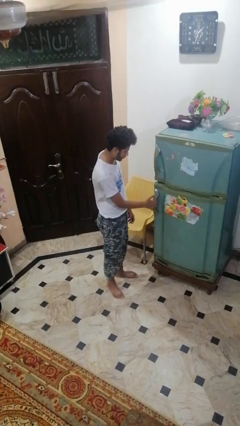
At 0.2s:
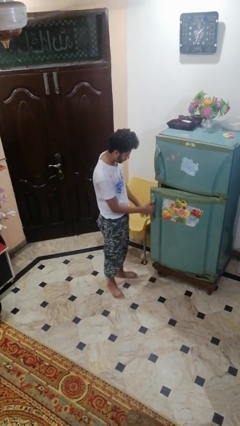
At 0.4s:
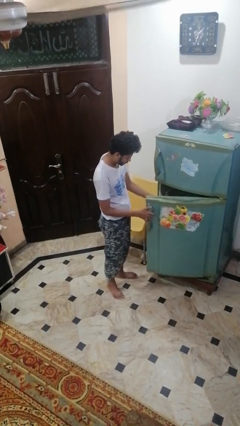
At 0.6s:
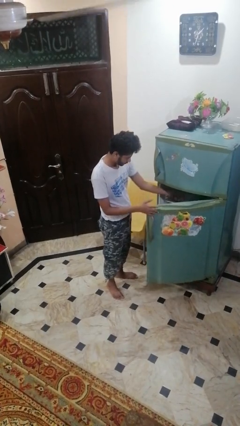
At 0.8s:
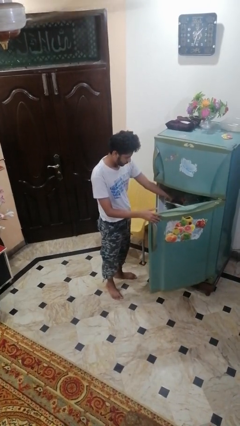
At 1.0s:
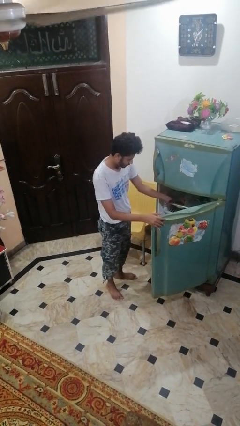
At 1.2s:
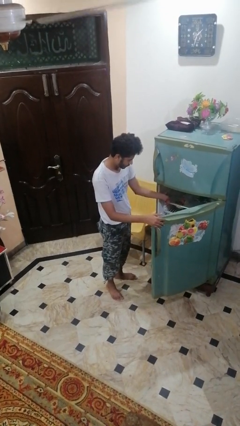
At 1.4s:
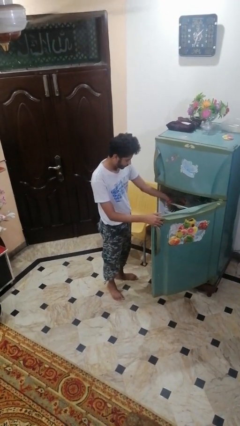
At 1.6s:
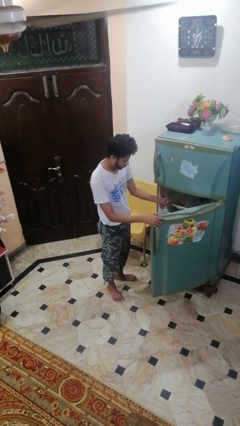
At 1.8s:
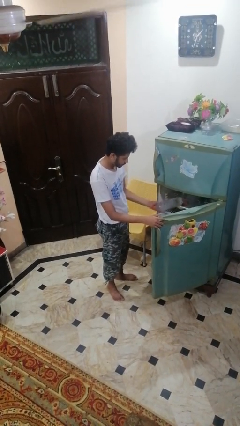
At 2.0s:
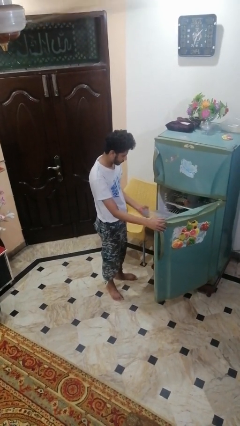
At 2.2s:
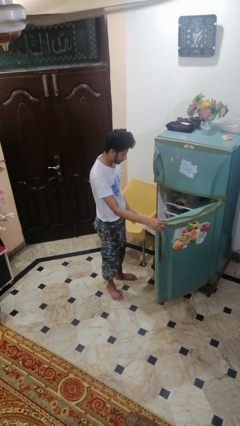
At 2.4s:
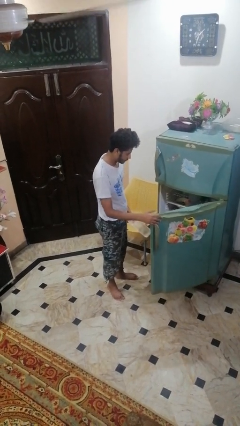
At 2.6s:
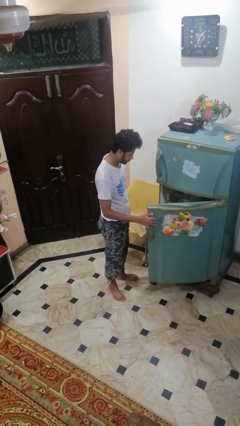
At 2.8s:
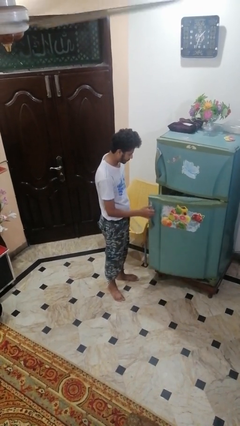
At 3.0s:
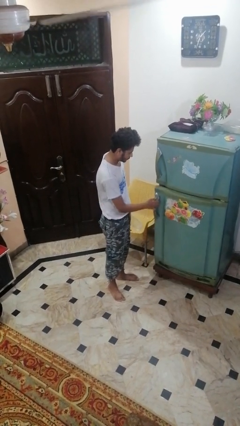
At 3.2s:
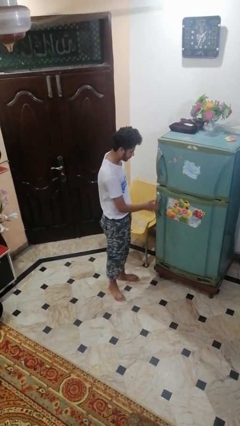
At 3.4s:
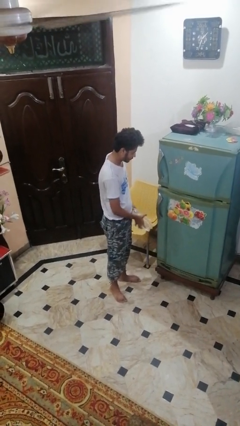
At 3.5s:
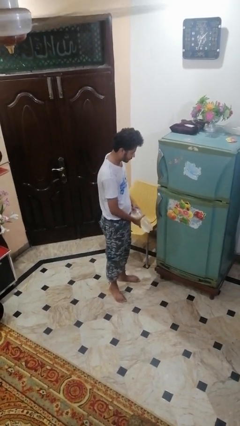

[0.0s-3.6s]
person takes object from refrigerator

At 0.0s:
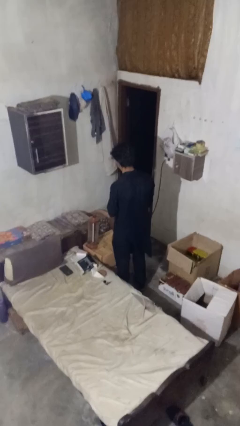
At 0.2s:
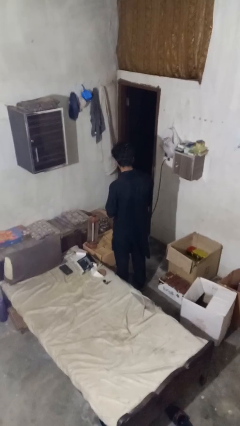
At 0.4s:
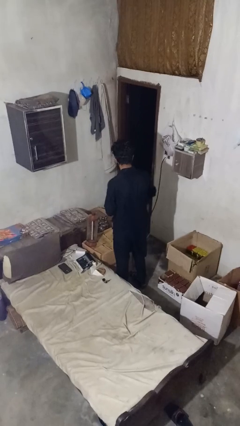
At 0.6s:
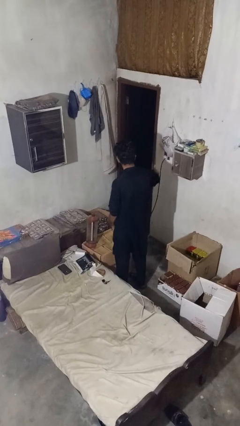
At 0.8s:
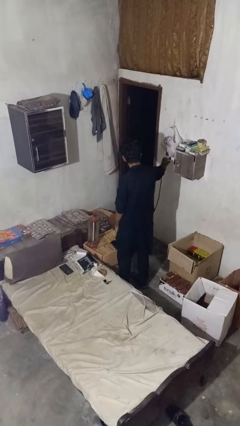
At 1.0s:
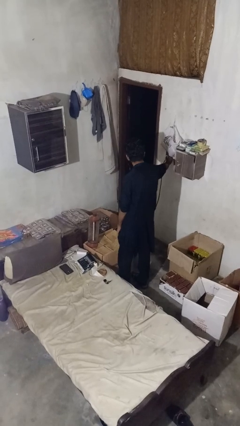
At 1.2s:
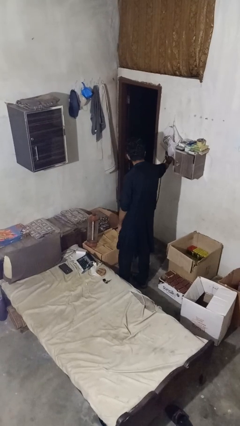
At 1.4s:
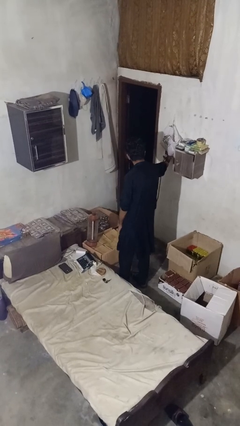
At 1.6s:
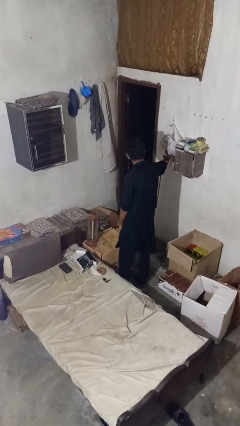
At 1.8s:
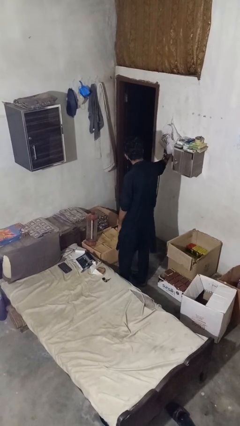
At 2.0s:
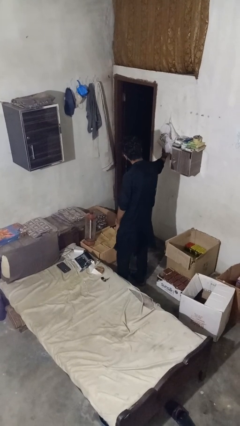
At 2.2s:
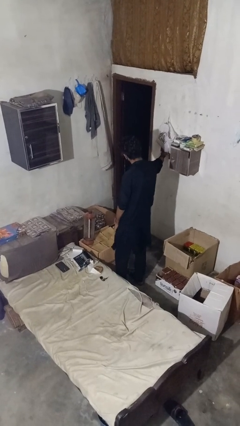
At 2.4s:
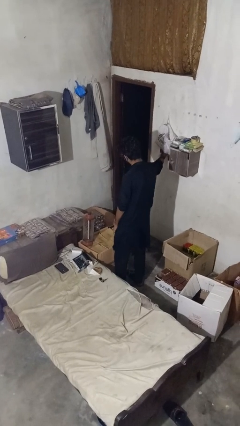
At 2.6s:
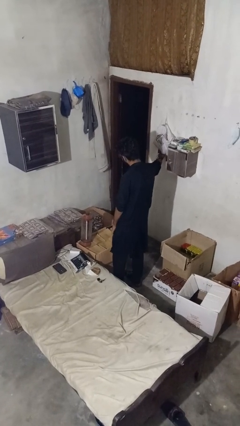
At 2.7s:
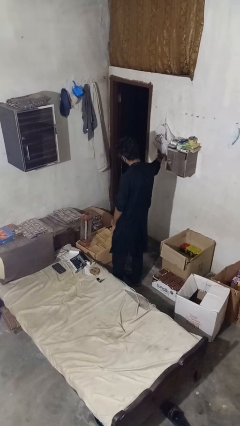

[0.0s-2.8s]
person turns on lamp

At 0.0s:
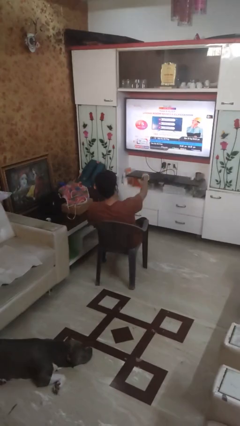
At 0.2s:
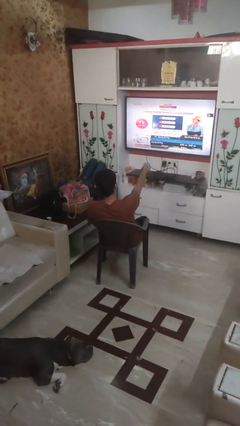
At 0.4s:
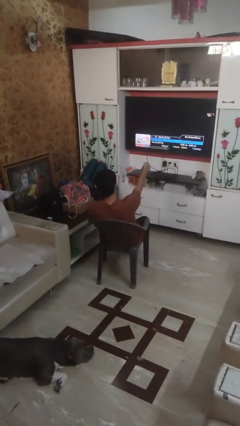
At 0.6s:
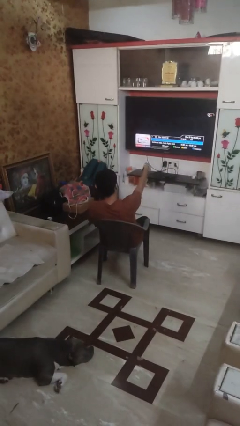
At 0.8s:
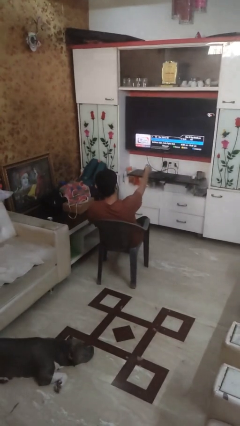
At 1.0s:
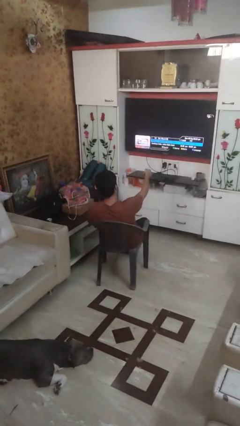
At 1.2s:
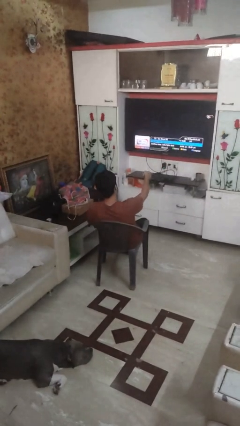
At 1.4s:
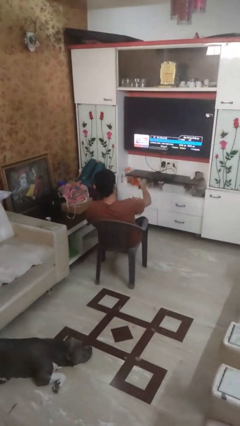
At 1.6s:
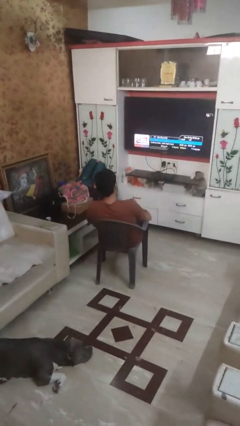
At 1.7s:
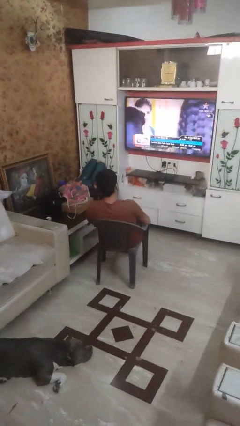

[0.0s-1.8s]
person uses television remote

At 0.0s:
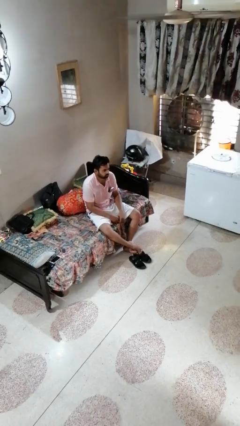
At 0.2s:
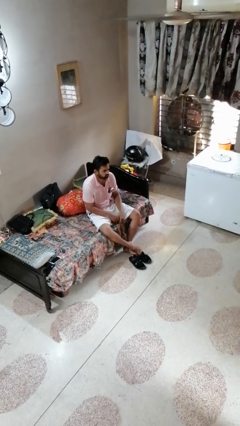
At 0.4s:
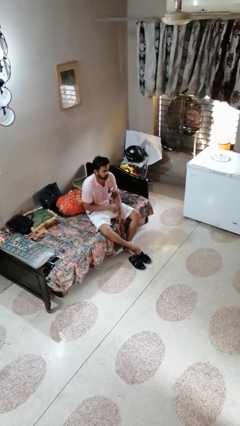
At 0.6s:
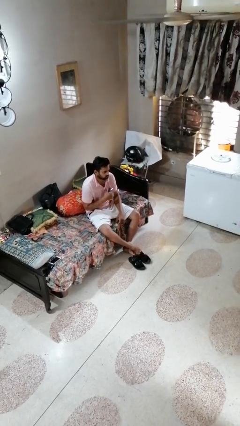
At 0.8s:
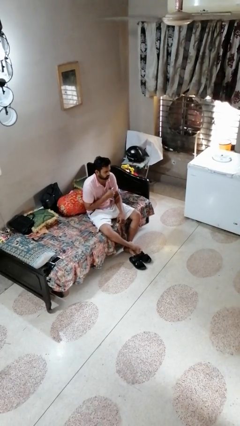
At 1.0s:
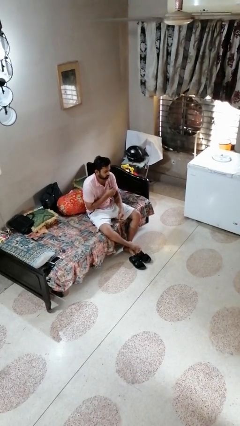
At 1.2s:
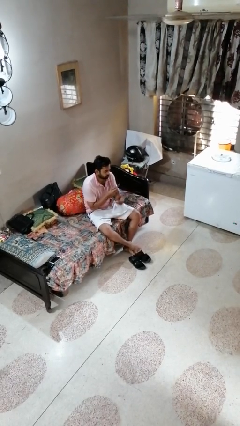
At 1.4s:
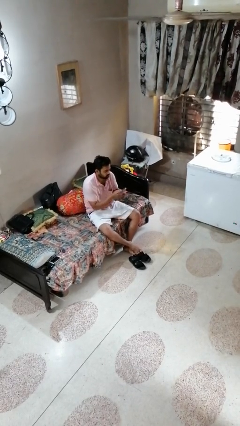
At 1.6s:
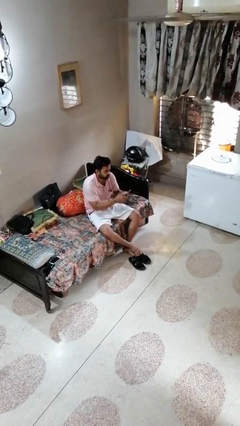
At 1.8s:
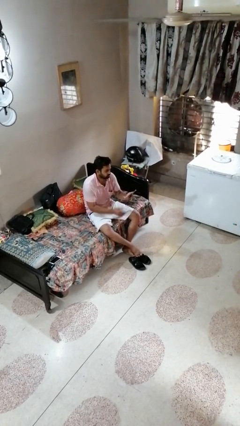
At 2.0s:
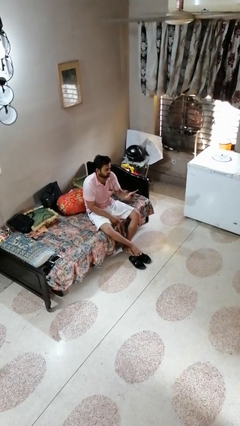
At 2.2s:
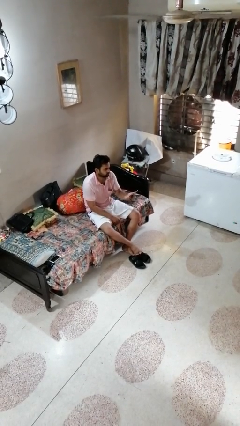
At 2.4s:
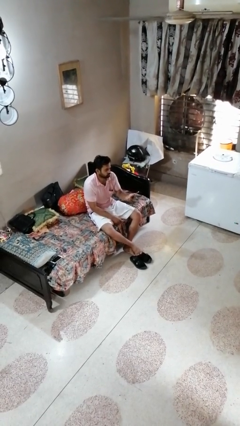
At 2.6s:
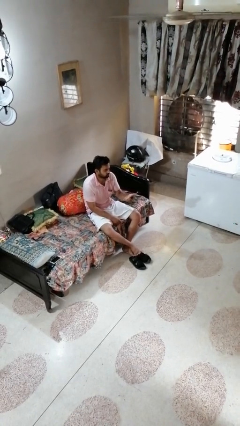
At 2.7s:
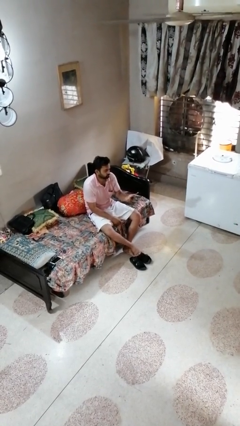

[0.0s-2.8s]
person takes phone from pocket

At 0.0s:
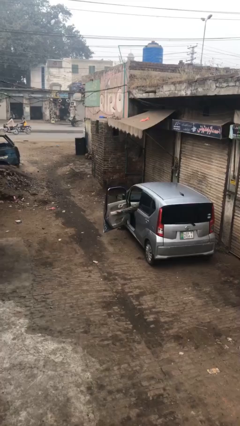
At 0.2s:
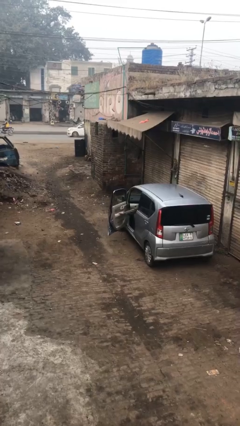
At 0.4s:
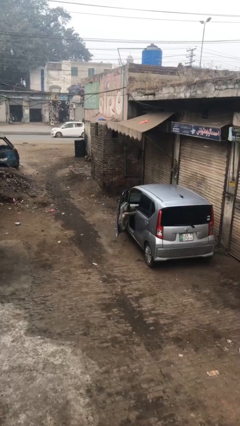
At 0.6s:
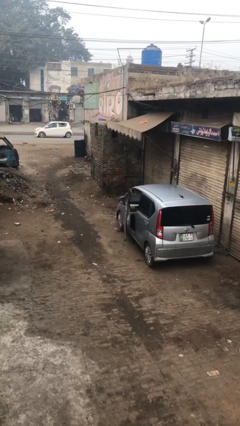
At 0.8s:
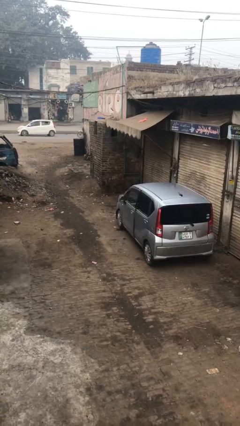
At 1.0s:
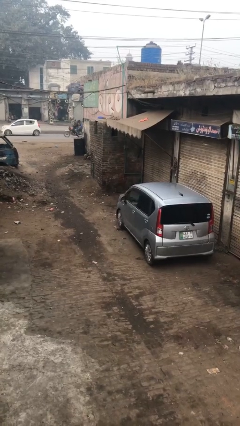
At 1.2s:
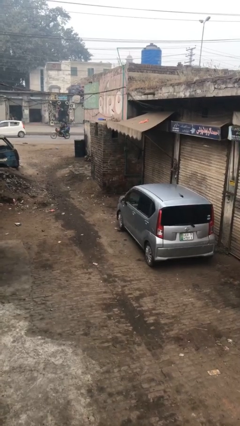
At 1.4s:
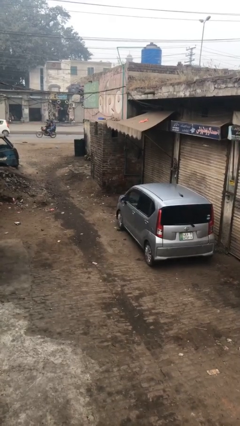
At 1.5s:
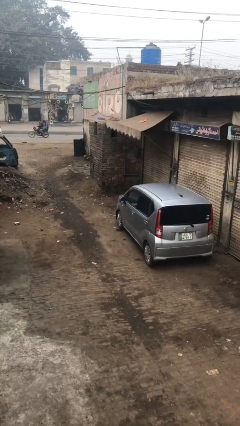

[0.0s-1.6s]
person closes car door

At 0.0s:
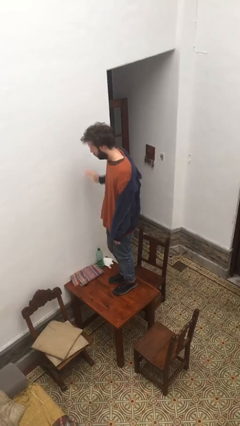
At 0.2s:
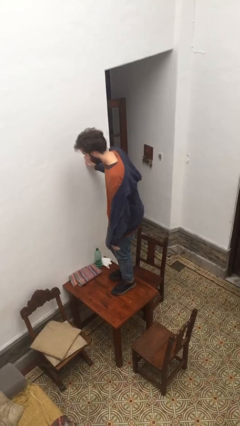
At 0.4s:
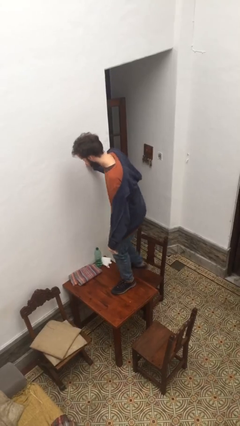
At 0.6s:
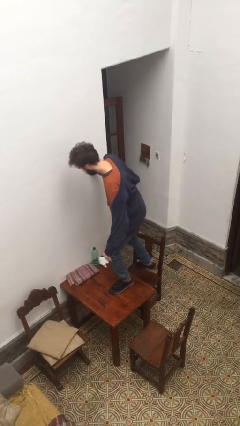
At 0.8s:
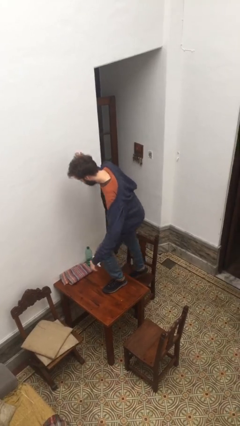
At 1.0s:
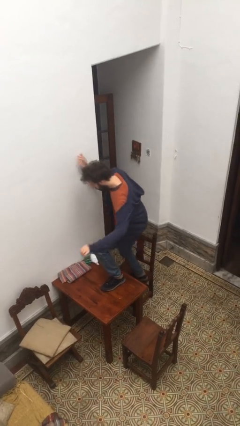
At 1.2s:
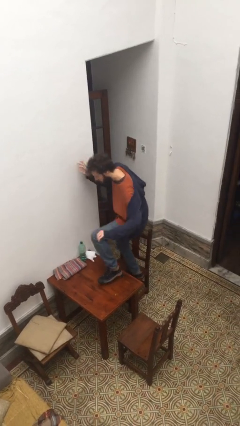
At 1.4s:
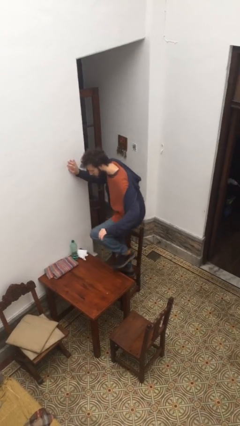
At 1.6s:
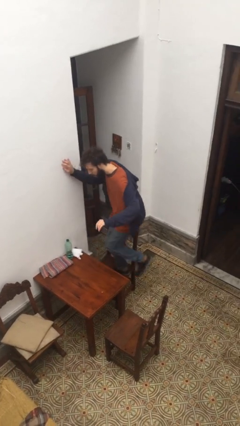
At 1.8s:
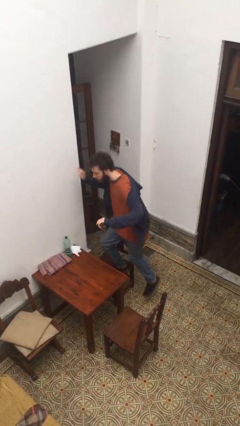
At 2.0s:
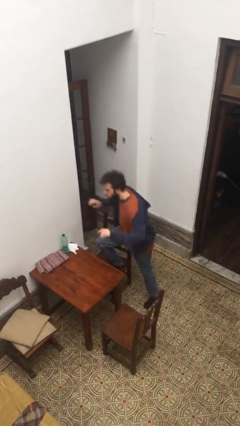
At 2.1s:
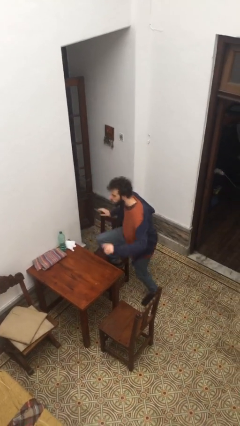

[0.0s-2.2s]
person climbs off table

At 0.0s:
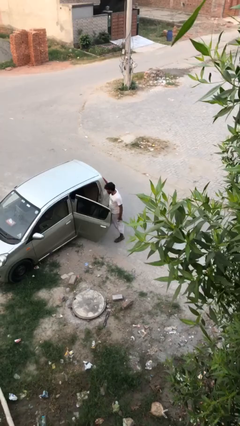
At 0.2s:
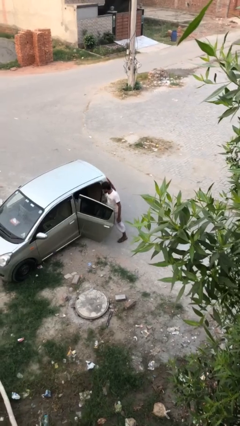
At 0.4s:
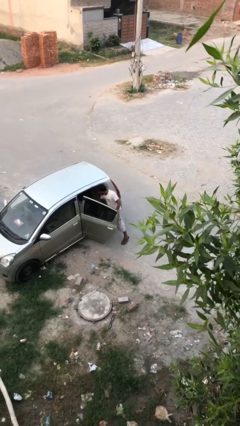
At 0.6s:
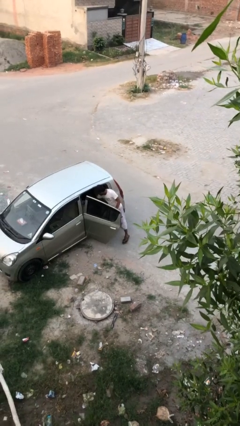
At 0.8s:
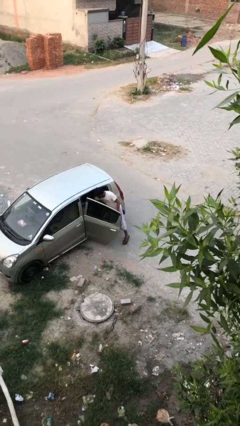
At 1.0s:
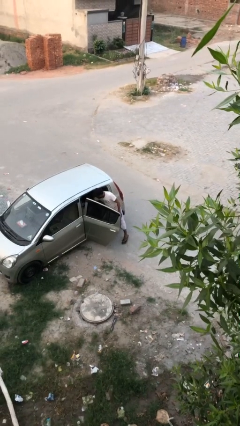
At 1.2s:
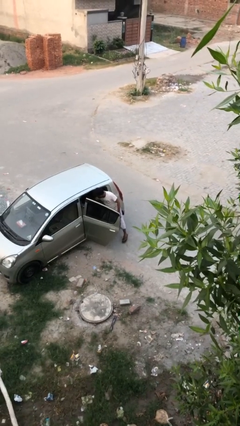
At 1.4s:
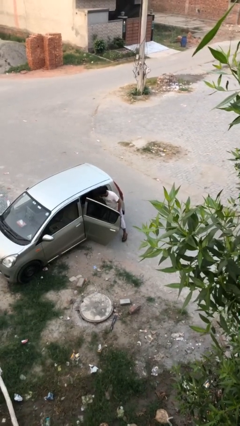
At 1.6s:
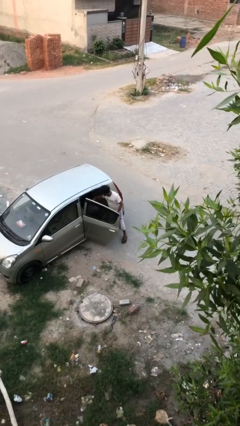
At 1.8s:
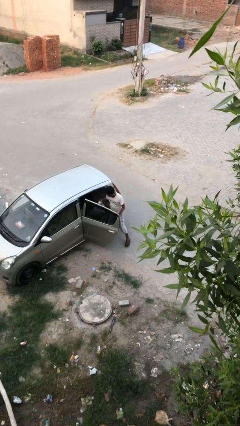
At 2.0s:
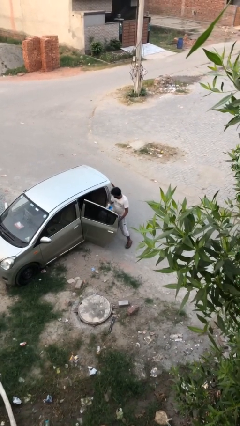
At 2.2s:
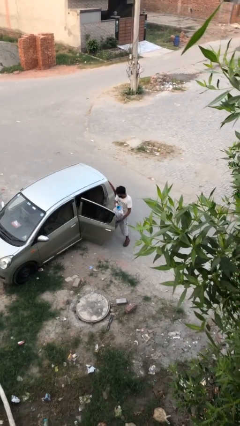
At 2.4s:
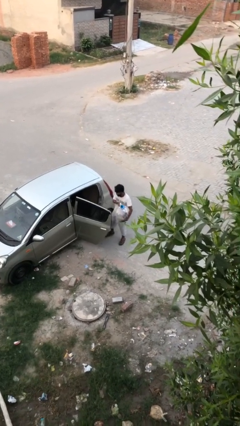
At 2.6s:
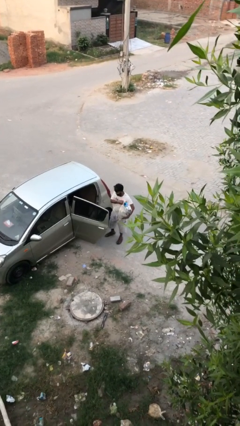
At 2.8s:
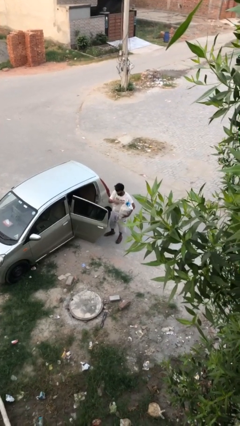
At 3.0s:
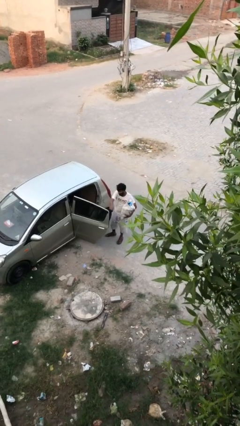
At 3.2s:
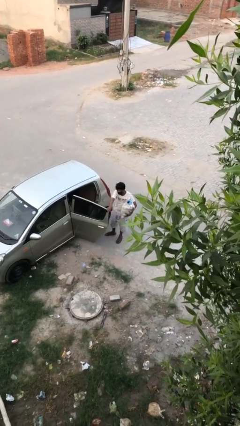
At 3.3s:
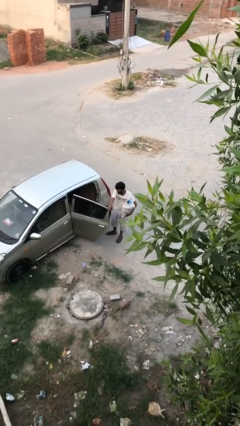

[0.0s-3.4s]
person unloads car
